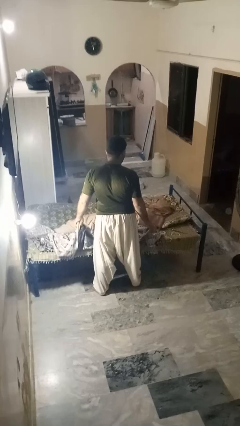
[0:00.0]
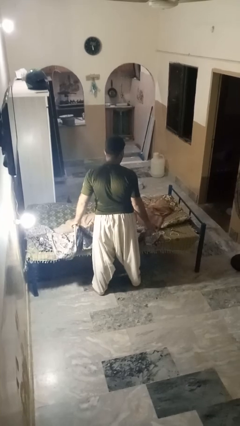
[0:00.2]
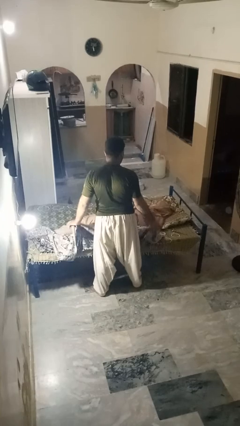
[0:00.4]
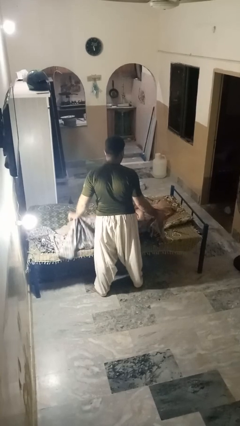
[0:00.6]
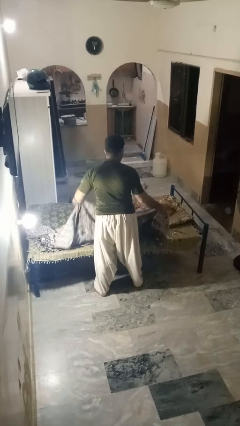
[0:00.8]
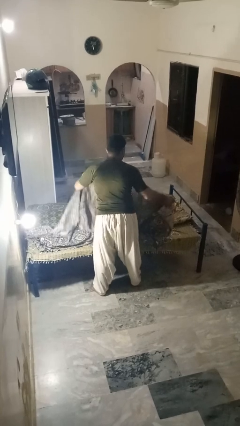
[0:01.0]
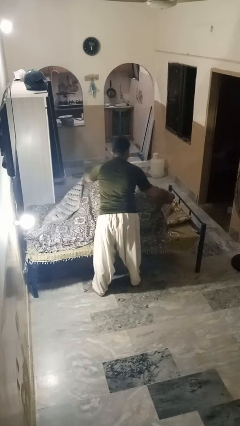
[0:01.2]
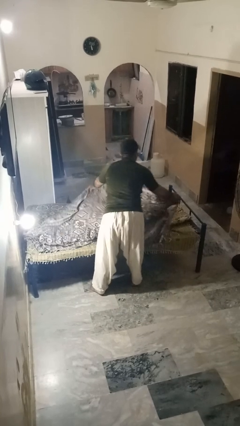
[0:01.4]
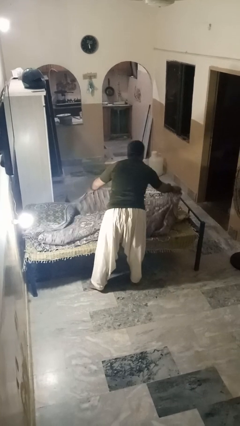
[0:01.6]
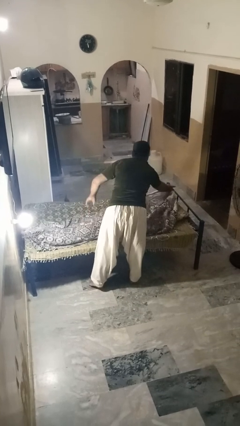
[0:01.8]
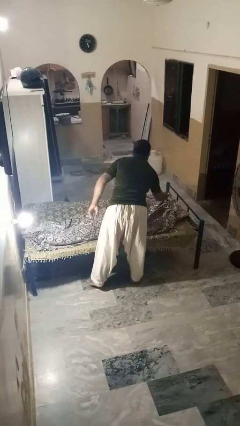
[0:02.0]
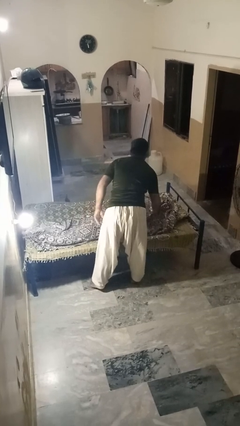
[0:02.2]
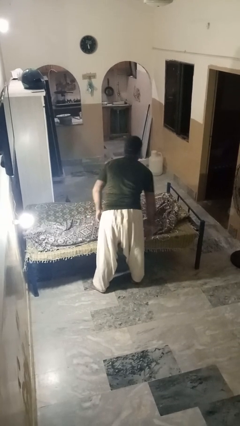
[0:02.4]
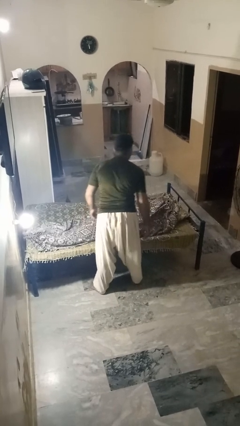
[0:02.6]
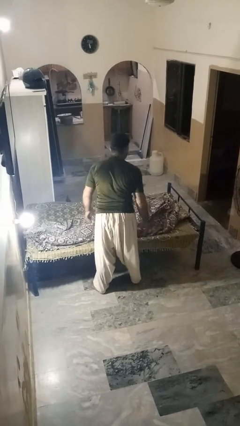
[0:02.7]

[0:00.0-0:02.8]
person covers friend with blanket

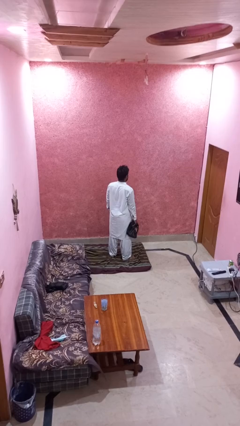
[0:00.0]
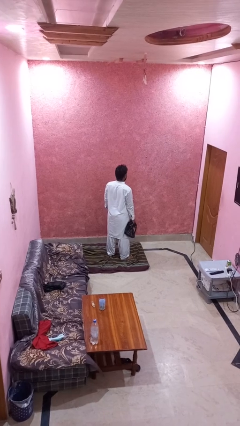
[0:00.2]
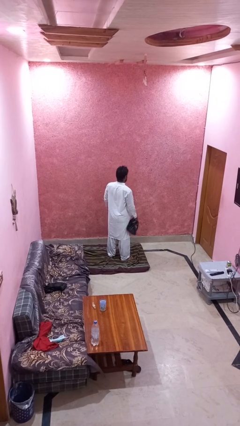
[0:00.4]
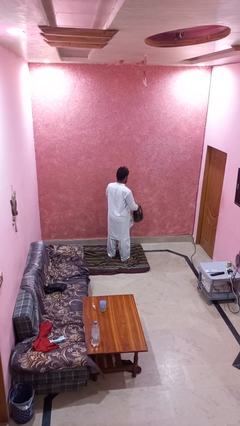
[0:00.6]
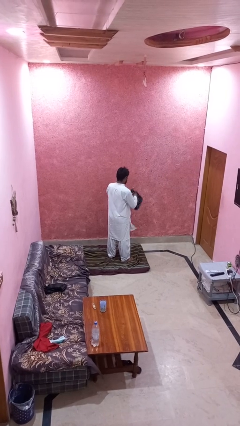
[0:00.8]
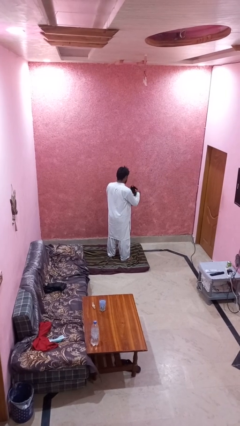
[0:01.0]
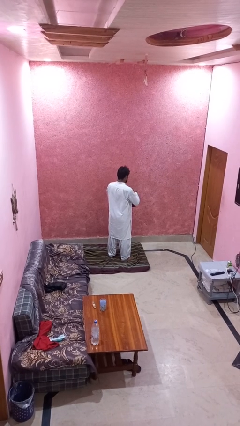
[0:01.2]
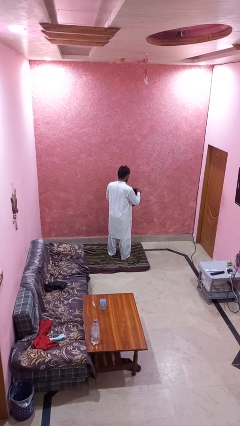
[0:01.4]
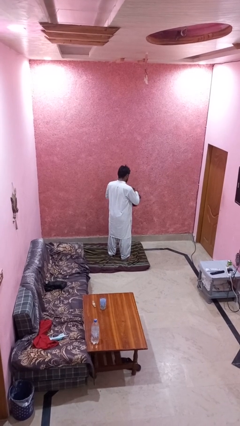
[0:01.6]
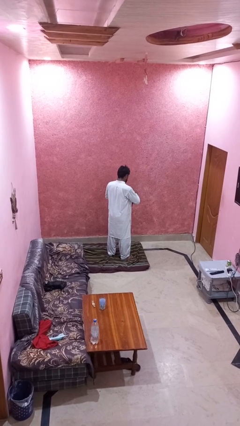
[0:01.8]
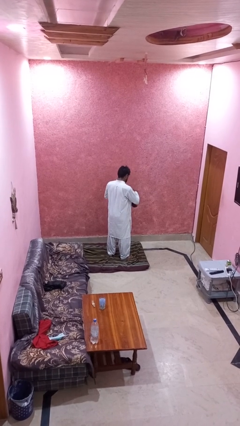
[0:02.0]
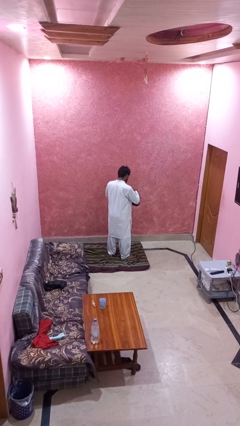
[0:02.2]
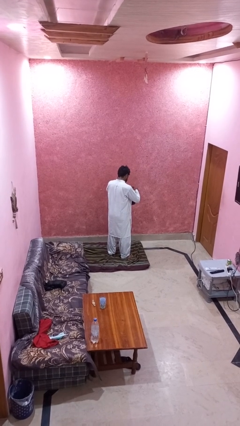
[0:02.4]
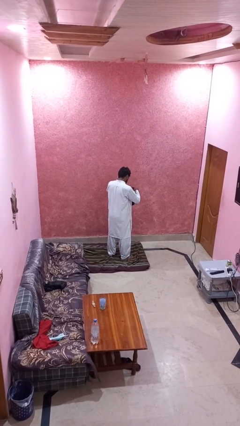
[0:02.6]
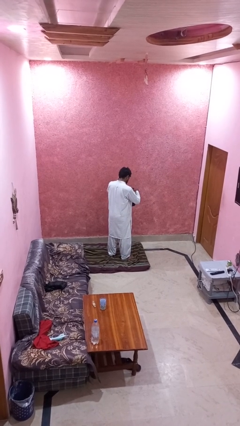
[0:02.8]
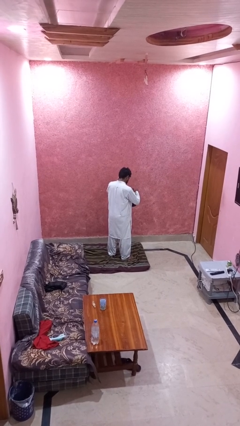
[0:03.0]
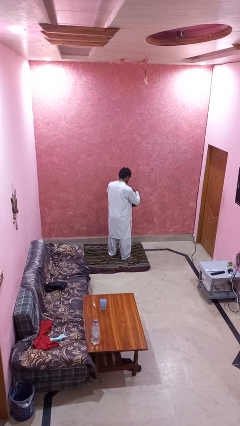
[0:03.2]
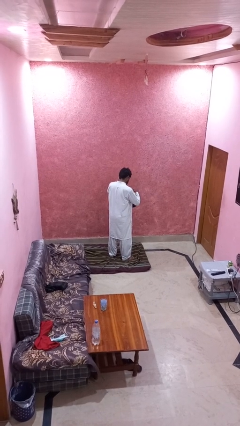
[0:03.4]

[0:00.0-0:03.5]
person searches in purse

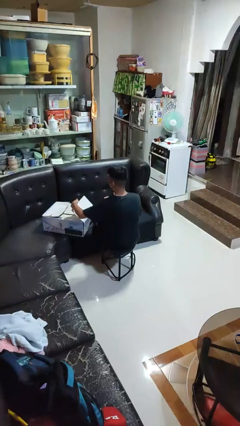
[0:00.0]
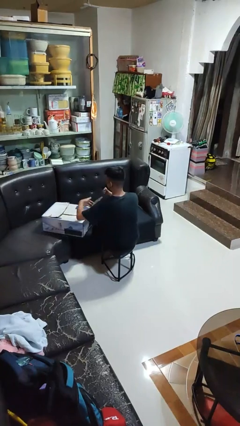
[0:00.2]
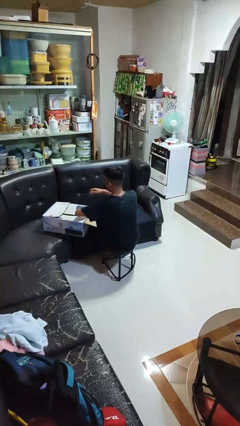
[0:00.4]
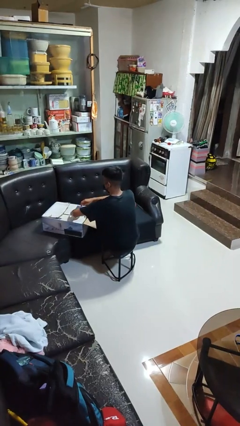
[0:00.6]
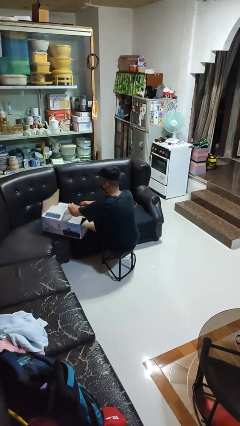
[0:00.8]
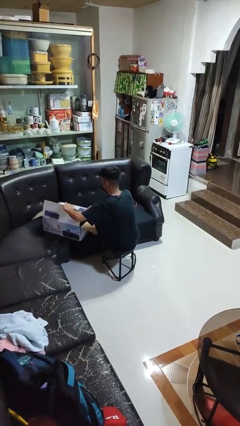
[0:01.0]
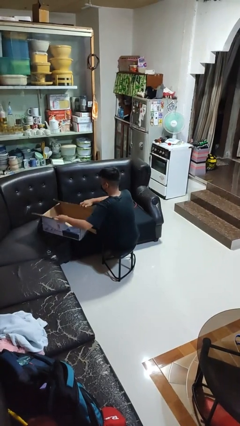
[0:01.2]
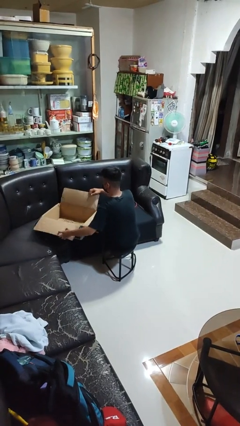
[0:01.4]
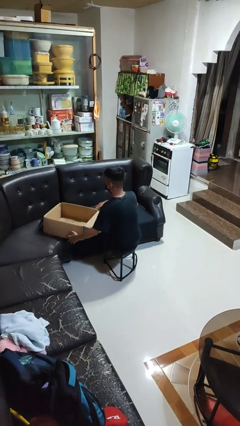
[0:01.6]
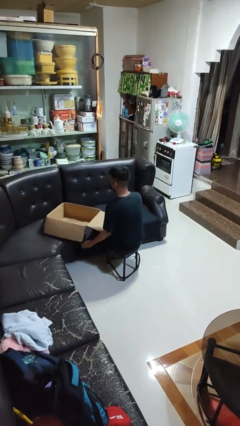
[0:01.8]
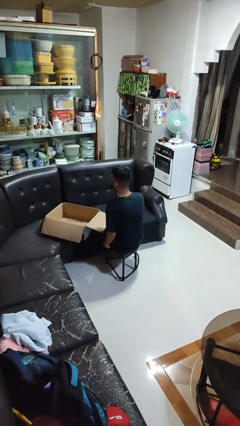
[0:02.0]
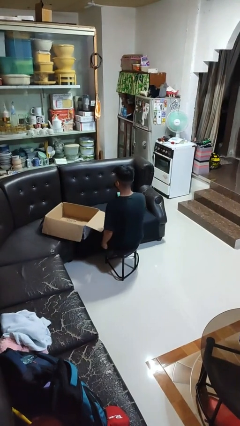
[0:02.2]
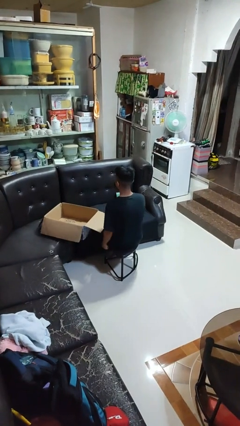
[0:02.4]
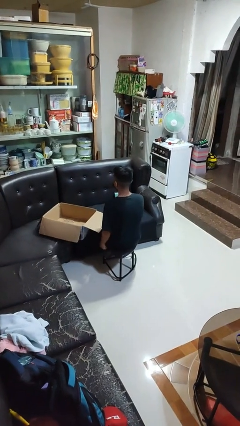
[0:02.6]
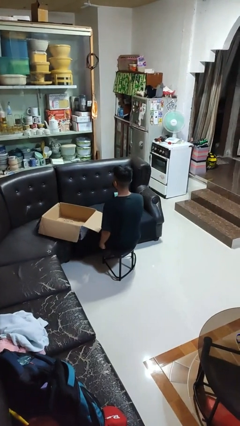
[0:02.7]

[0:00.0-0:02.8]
person opens box

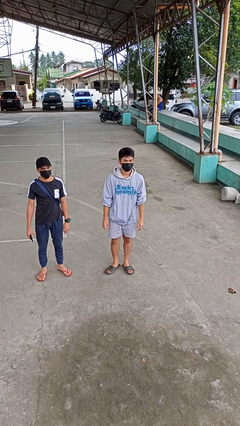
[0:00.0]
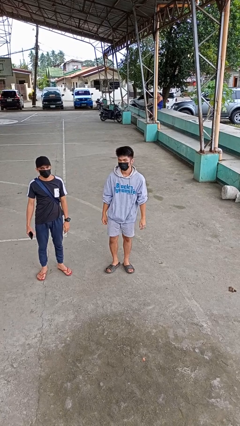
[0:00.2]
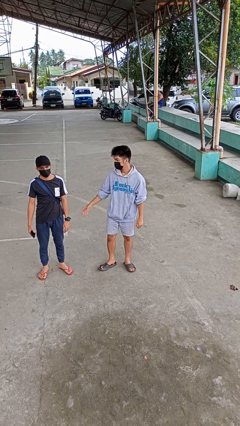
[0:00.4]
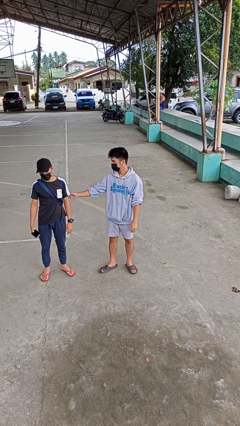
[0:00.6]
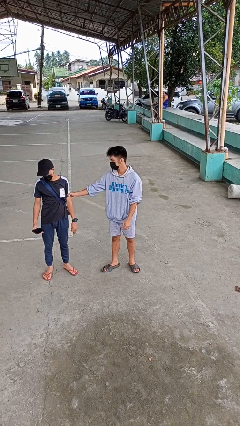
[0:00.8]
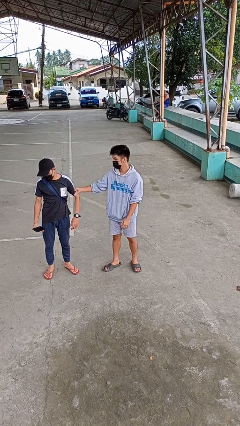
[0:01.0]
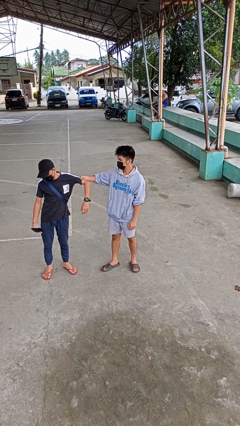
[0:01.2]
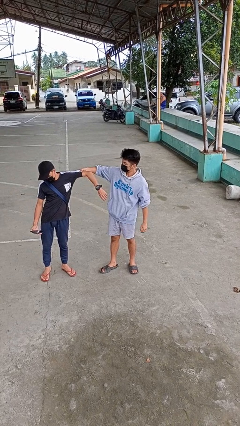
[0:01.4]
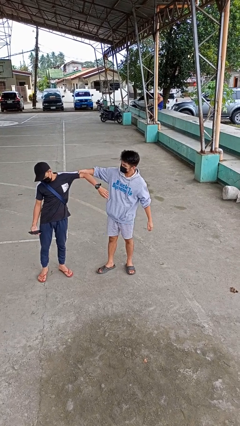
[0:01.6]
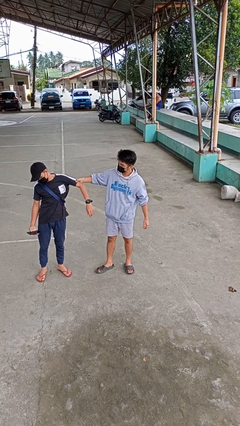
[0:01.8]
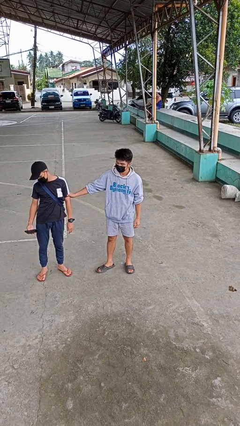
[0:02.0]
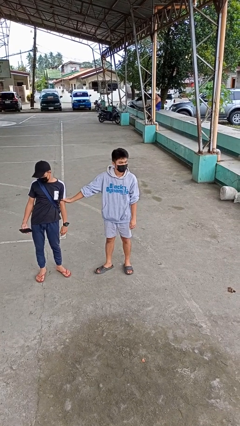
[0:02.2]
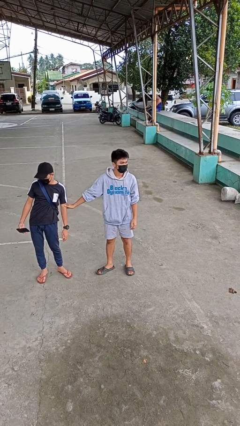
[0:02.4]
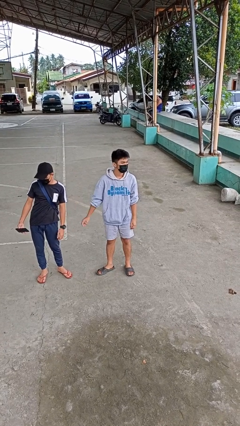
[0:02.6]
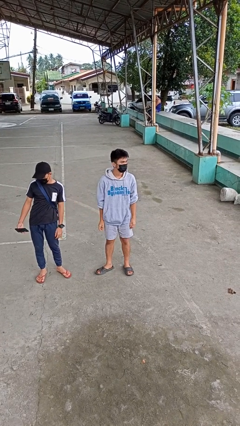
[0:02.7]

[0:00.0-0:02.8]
person grabs person by bicep

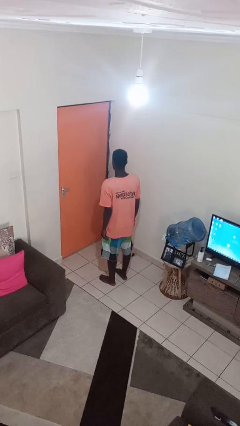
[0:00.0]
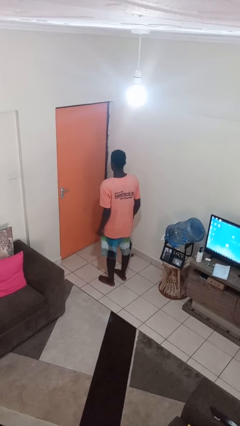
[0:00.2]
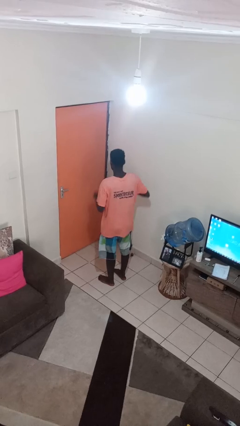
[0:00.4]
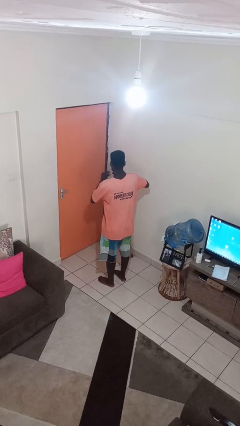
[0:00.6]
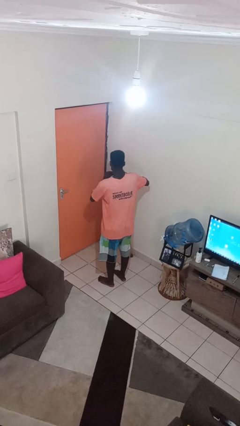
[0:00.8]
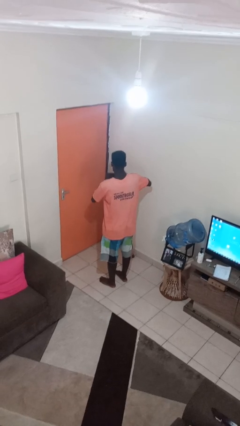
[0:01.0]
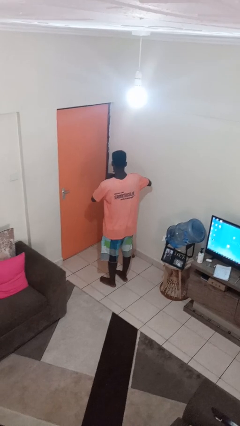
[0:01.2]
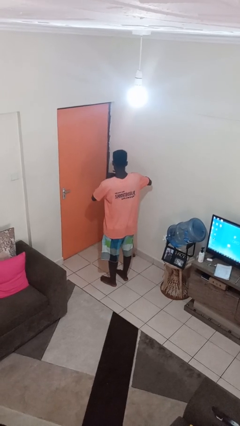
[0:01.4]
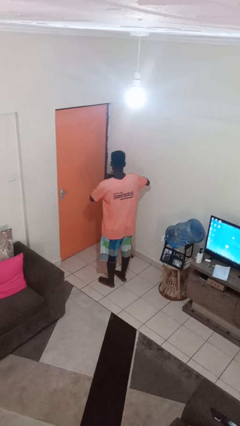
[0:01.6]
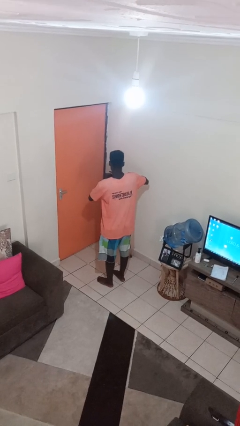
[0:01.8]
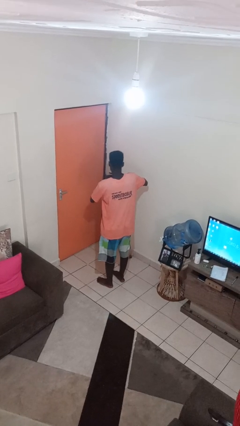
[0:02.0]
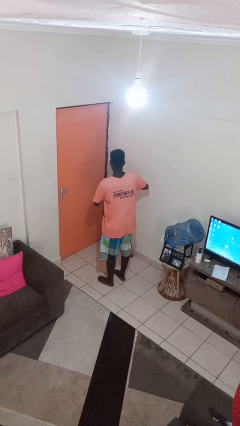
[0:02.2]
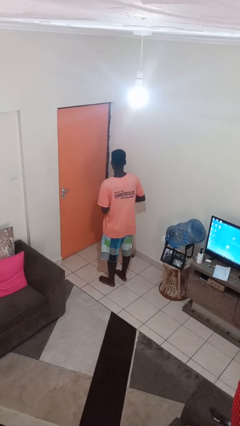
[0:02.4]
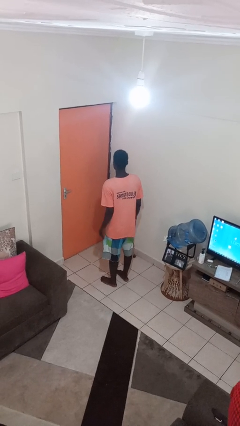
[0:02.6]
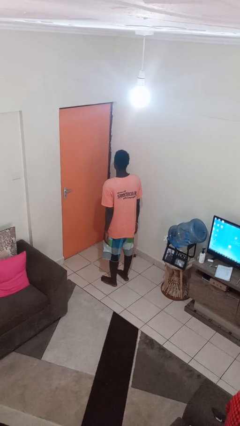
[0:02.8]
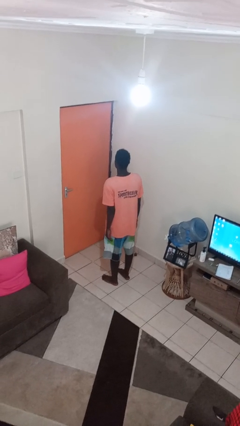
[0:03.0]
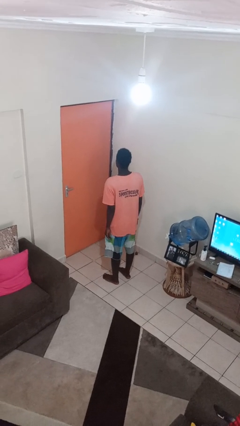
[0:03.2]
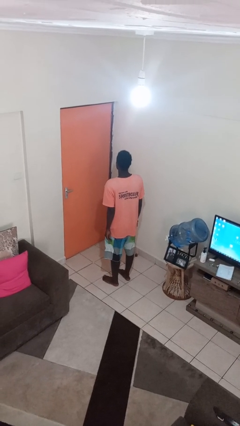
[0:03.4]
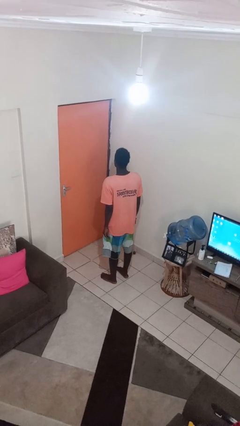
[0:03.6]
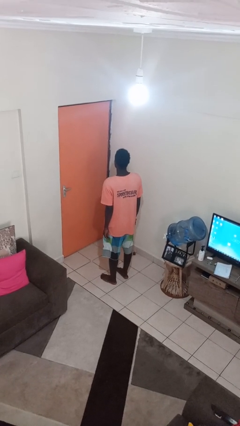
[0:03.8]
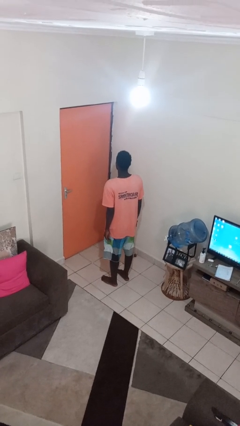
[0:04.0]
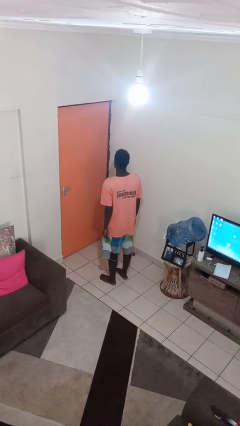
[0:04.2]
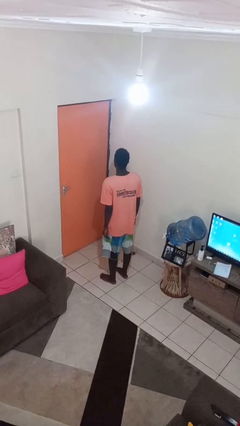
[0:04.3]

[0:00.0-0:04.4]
person puts on ring

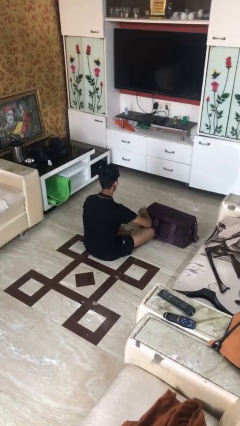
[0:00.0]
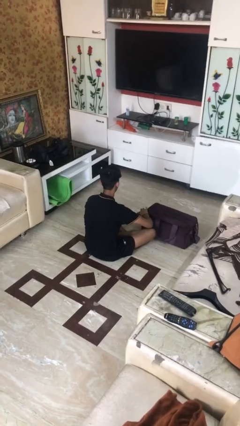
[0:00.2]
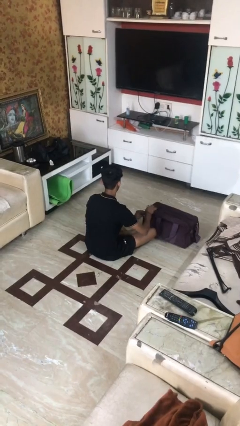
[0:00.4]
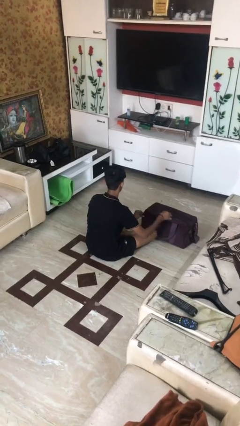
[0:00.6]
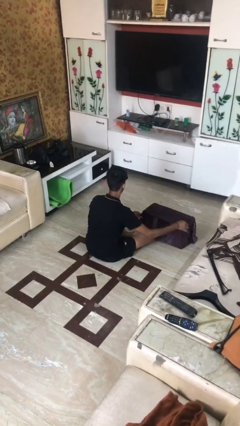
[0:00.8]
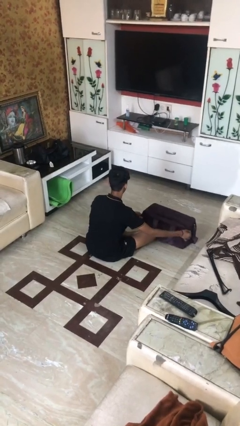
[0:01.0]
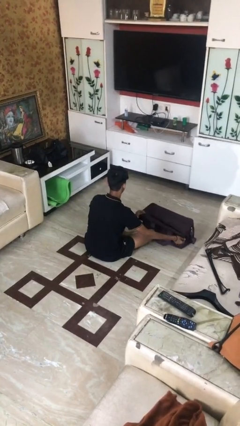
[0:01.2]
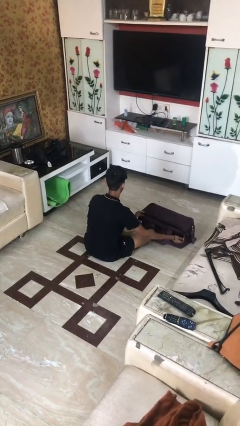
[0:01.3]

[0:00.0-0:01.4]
person opens suitcase
